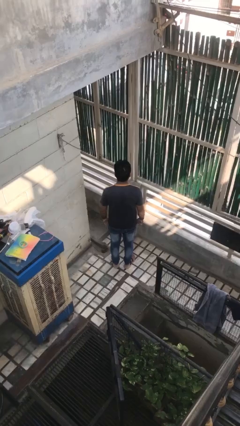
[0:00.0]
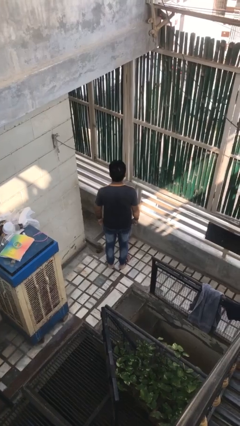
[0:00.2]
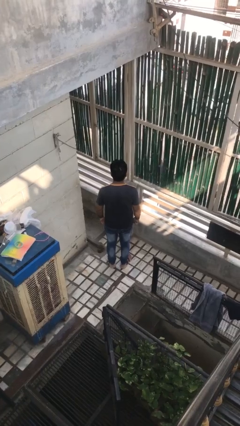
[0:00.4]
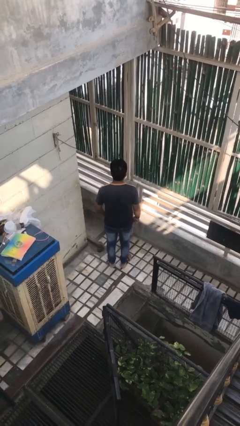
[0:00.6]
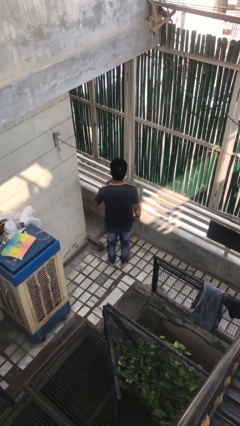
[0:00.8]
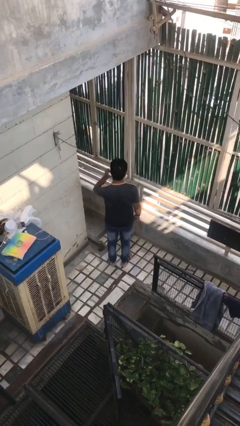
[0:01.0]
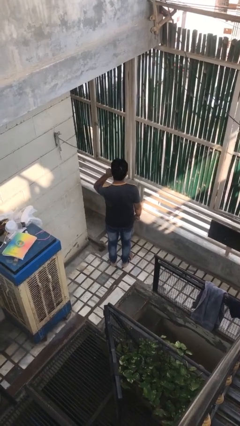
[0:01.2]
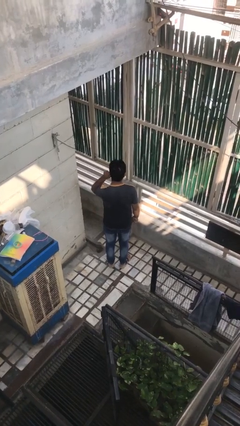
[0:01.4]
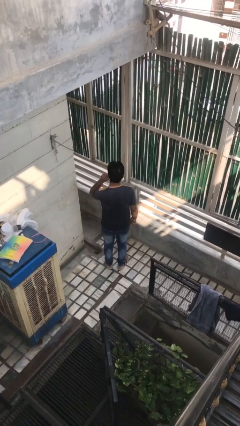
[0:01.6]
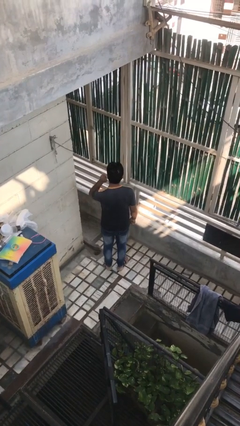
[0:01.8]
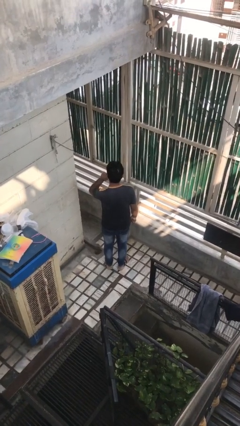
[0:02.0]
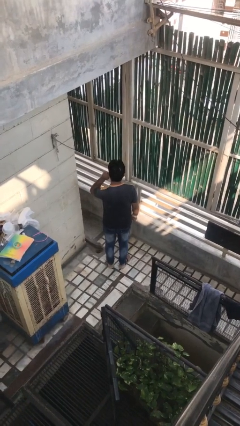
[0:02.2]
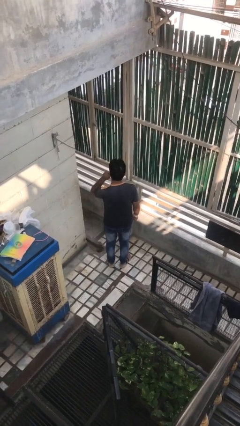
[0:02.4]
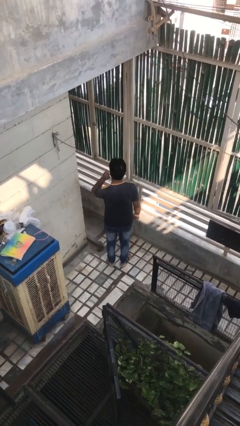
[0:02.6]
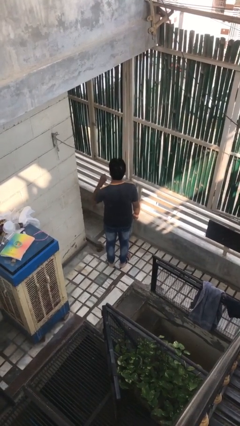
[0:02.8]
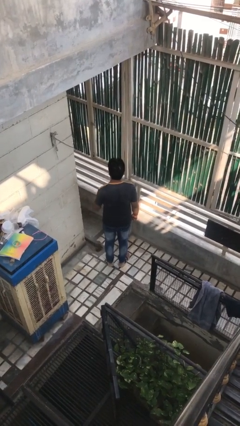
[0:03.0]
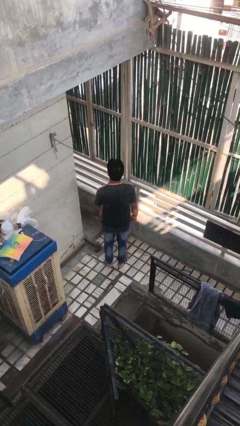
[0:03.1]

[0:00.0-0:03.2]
person touches earlobe

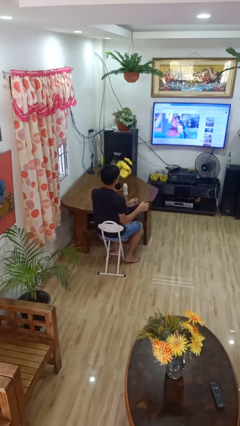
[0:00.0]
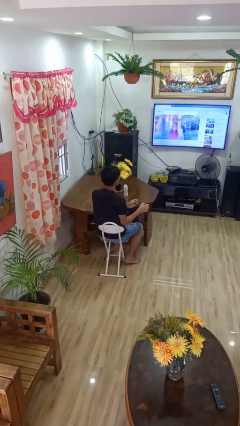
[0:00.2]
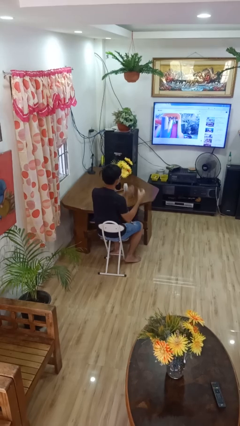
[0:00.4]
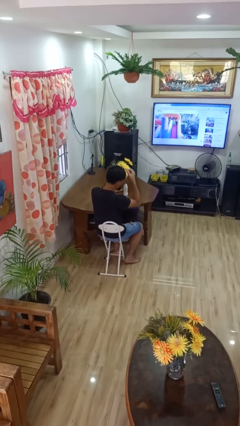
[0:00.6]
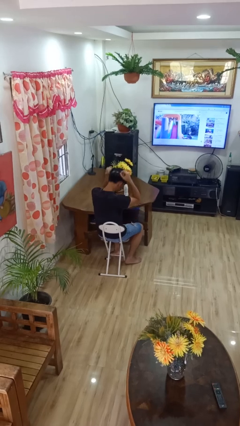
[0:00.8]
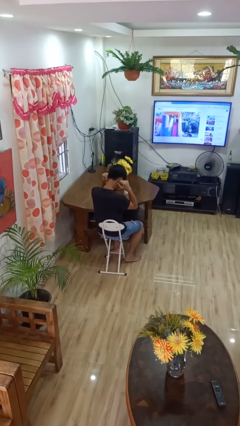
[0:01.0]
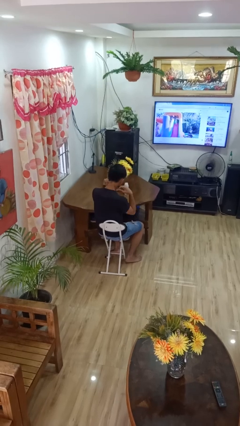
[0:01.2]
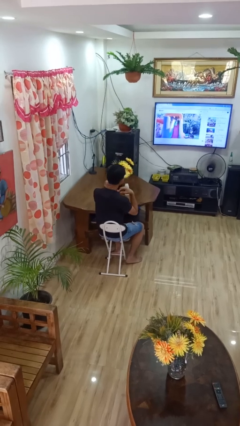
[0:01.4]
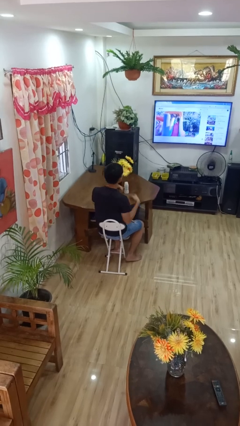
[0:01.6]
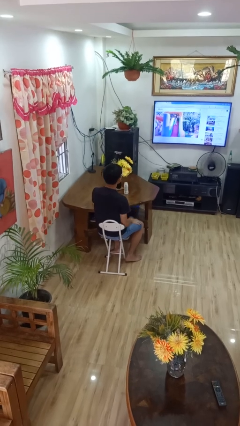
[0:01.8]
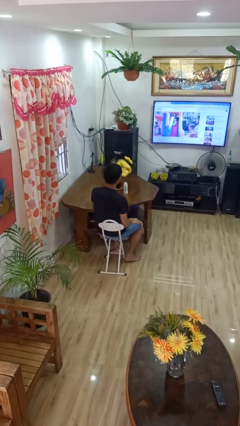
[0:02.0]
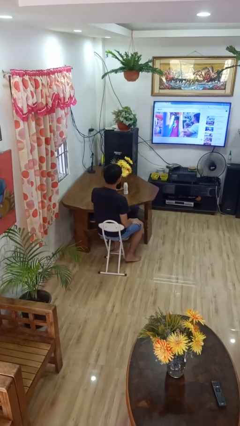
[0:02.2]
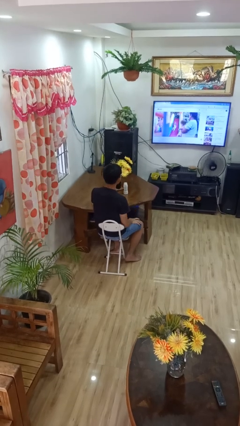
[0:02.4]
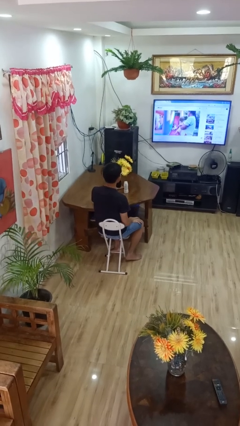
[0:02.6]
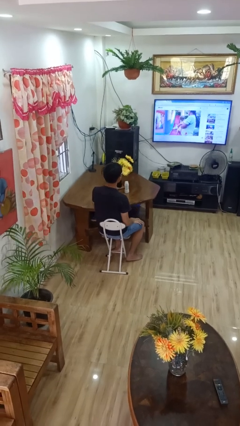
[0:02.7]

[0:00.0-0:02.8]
person puts on necklace

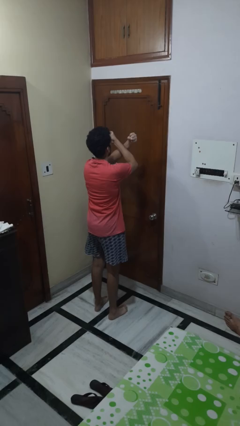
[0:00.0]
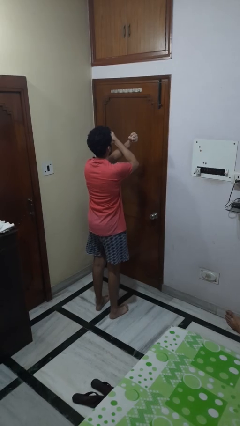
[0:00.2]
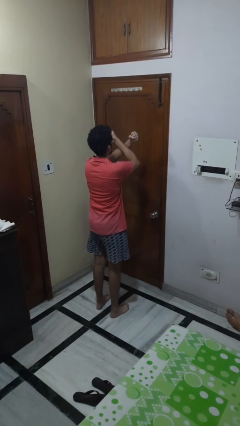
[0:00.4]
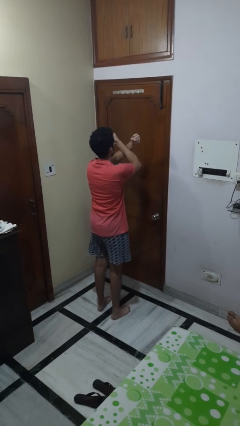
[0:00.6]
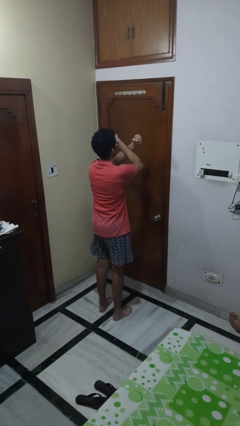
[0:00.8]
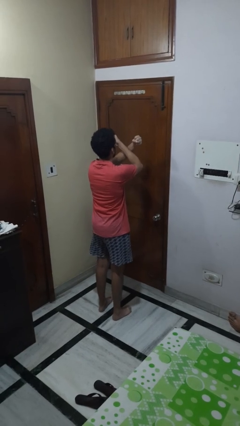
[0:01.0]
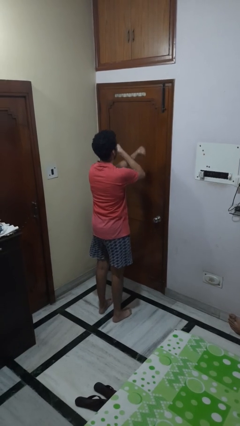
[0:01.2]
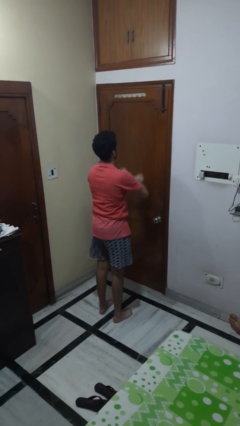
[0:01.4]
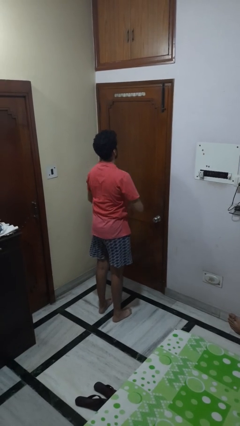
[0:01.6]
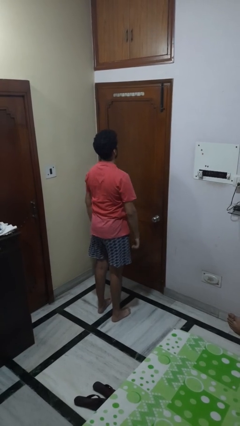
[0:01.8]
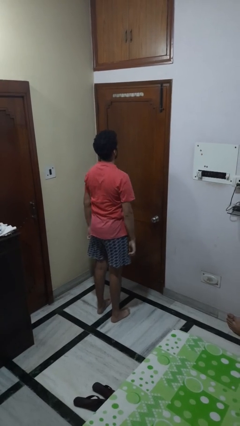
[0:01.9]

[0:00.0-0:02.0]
person gestures arms x

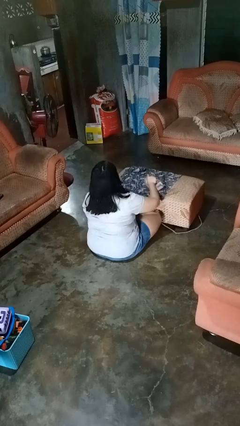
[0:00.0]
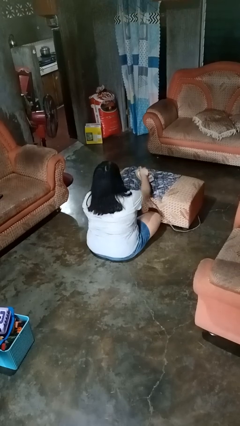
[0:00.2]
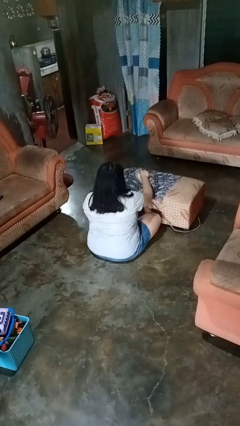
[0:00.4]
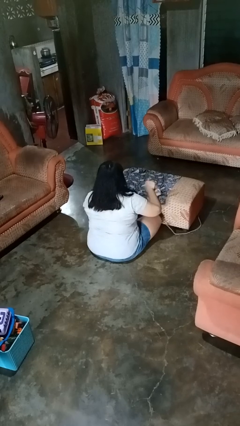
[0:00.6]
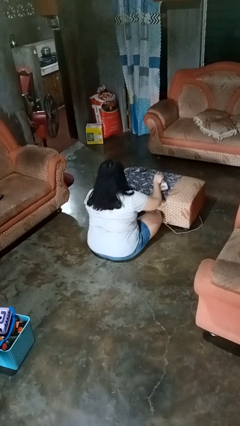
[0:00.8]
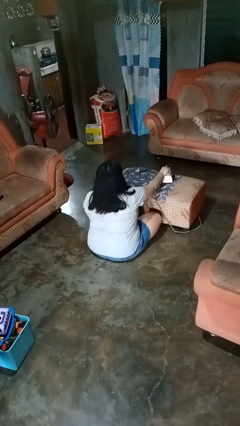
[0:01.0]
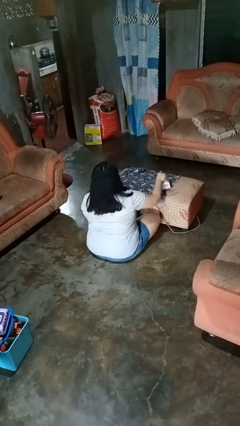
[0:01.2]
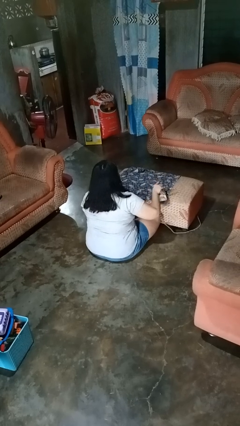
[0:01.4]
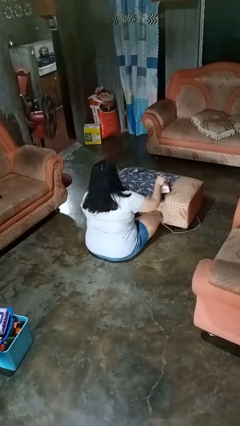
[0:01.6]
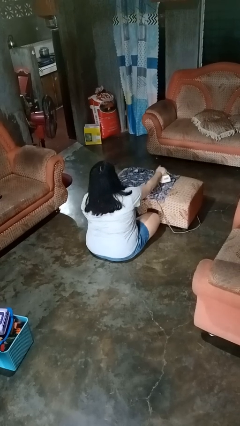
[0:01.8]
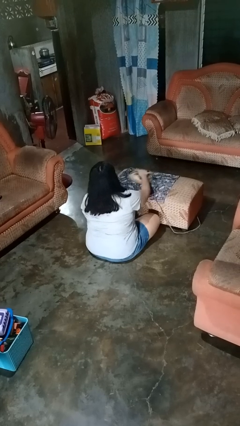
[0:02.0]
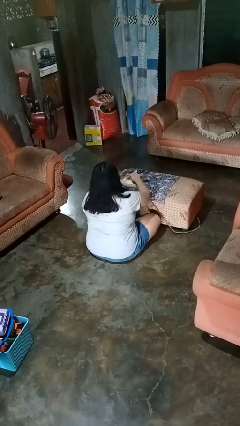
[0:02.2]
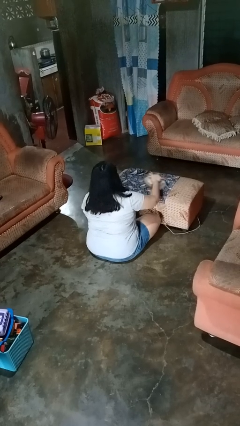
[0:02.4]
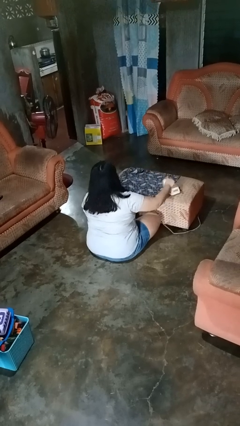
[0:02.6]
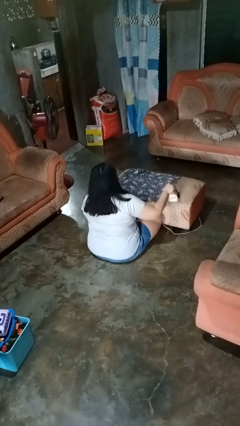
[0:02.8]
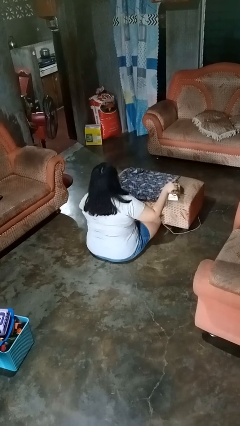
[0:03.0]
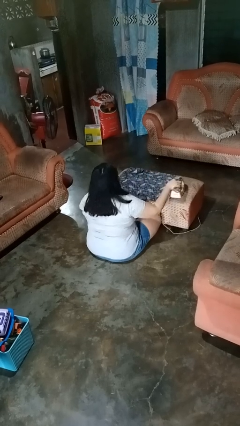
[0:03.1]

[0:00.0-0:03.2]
person irons clothes

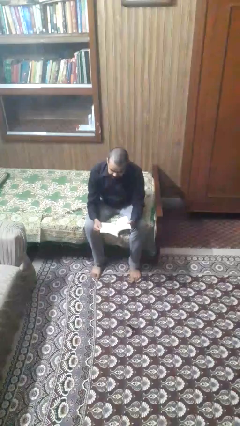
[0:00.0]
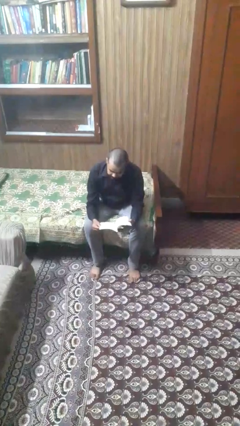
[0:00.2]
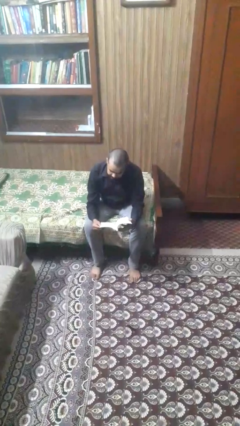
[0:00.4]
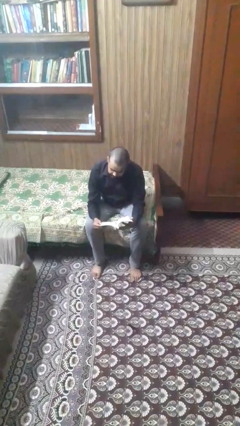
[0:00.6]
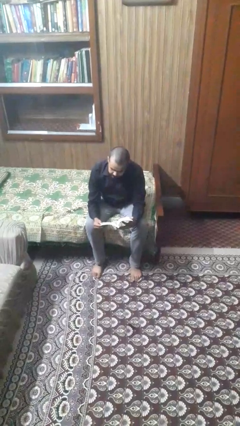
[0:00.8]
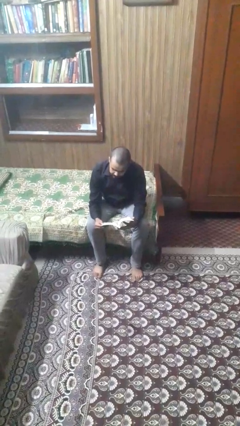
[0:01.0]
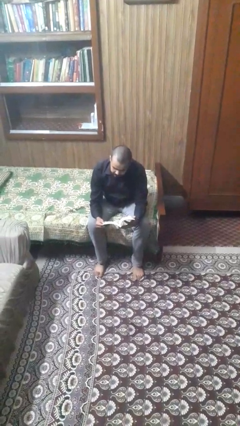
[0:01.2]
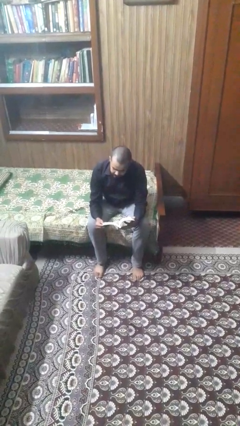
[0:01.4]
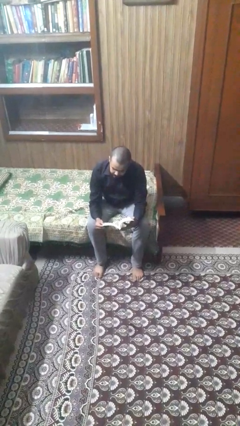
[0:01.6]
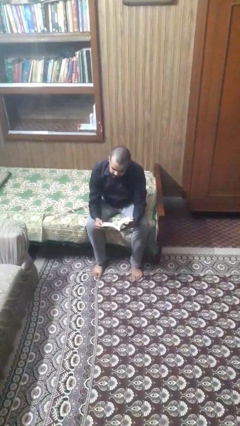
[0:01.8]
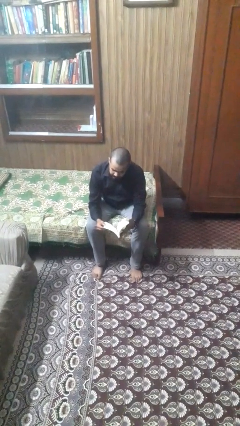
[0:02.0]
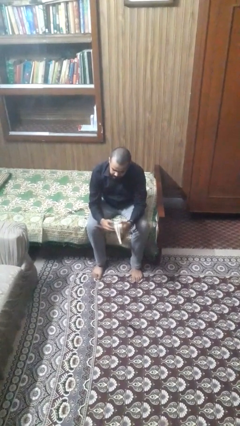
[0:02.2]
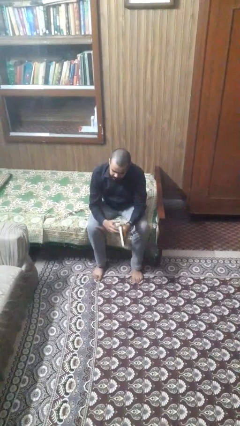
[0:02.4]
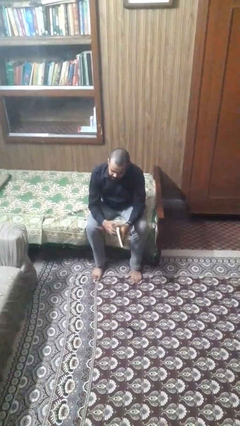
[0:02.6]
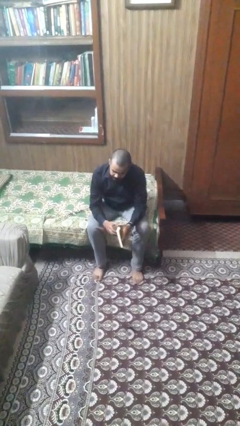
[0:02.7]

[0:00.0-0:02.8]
person reads magazine

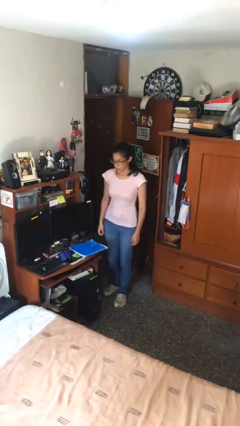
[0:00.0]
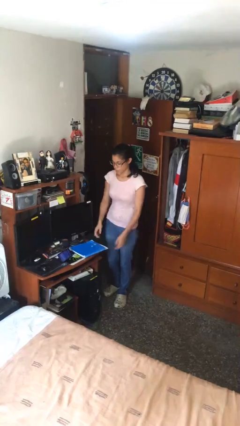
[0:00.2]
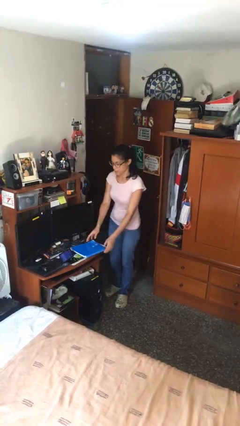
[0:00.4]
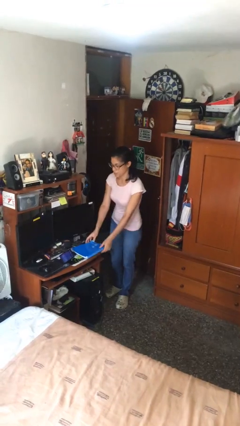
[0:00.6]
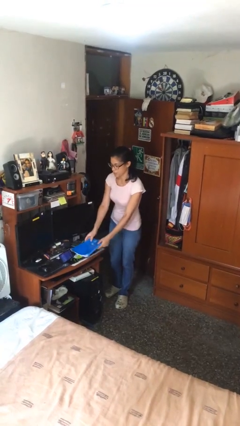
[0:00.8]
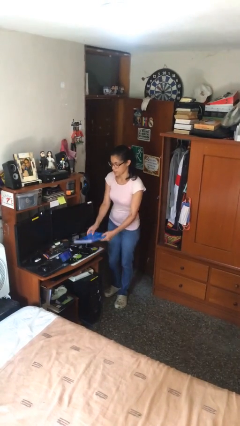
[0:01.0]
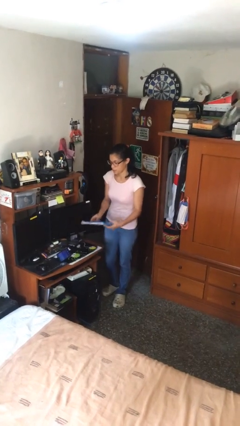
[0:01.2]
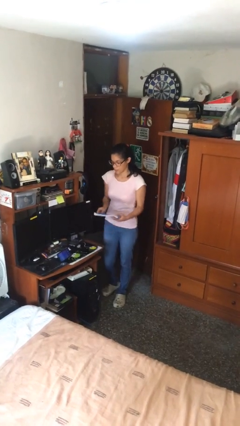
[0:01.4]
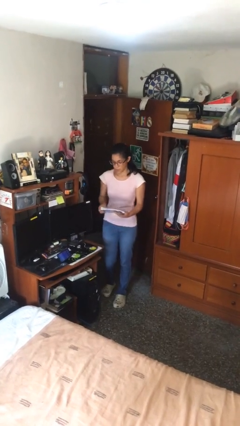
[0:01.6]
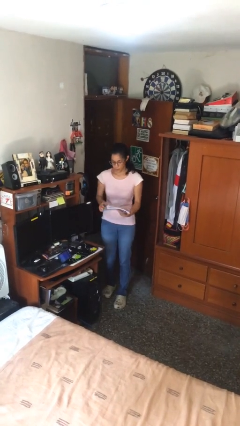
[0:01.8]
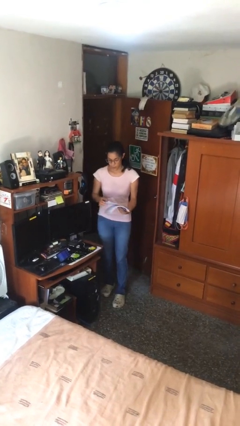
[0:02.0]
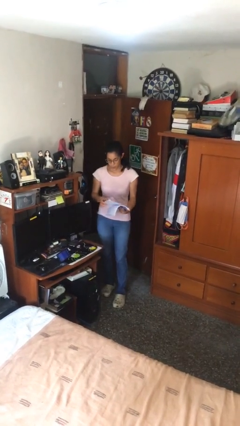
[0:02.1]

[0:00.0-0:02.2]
person picks up object from table

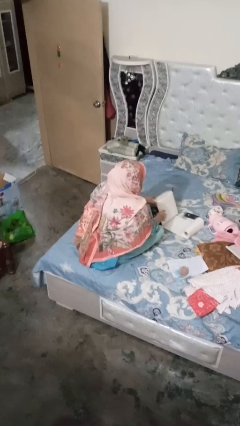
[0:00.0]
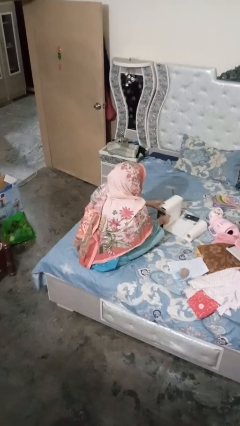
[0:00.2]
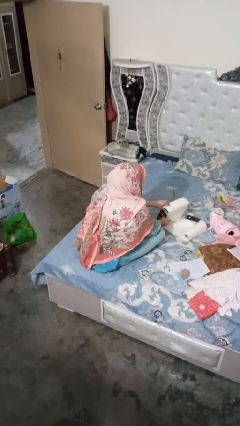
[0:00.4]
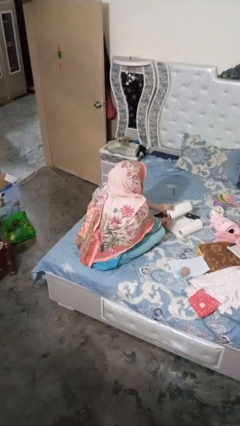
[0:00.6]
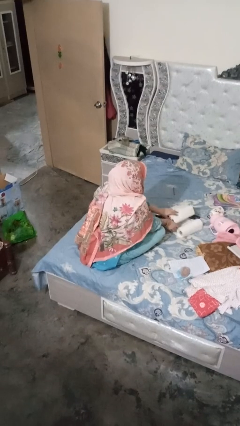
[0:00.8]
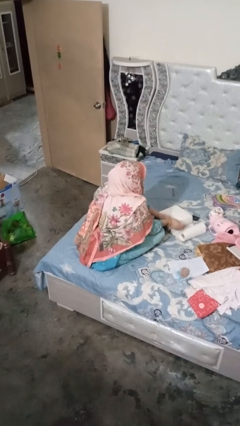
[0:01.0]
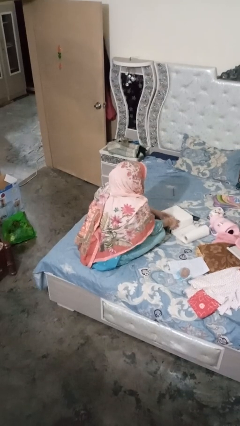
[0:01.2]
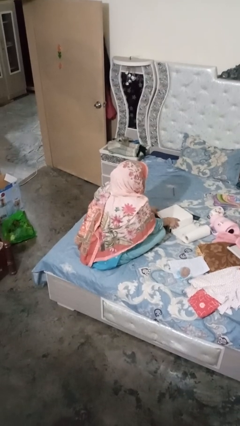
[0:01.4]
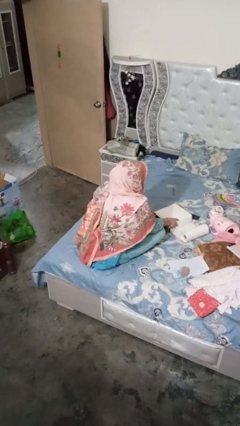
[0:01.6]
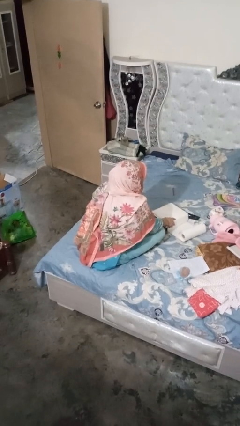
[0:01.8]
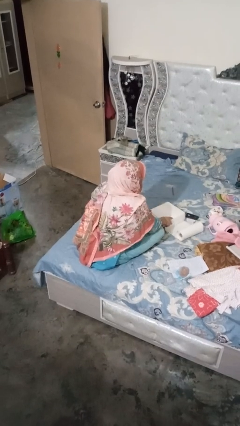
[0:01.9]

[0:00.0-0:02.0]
person wraps box
